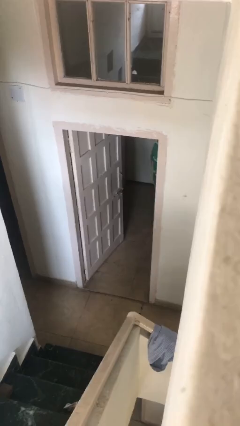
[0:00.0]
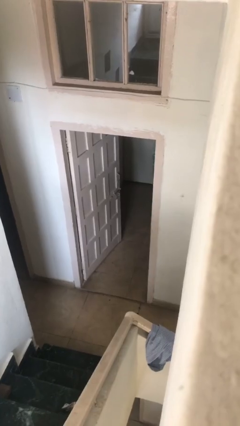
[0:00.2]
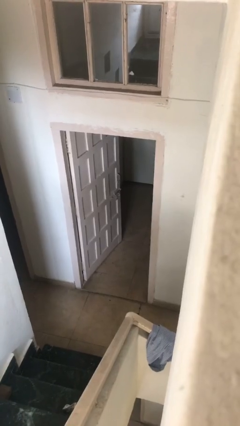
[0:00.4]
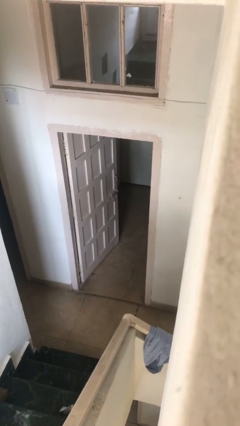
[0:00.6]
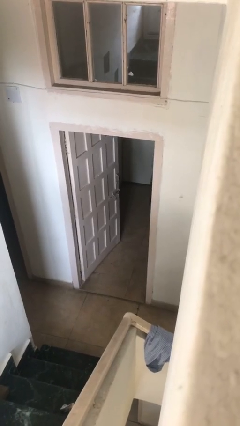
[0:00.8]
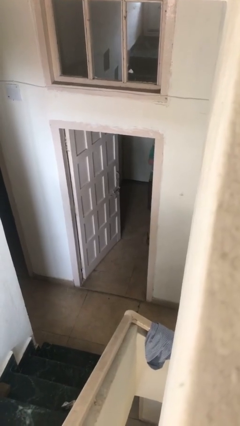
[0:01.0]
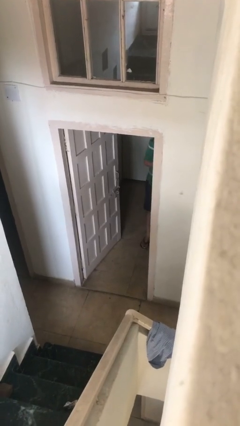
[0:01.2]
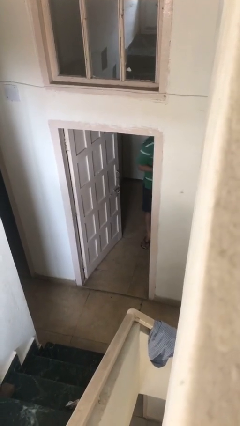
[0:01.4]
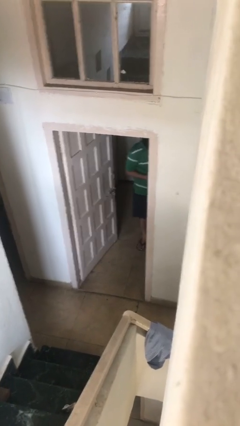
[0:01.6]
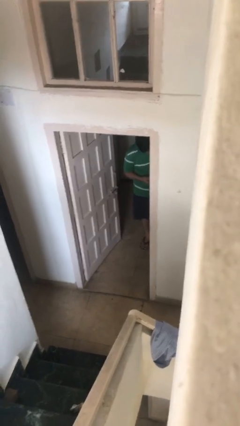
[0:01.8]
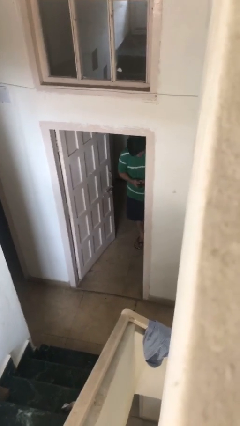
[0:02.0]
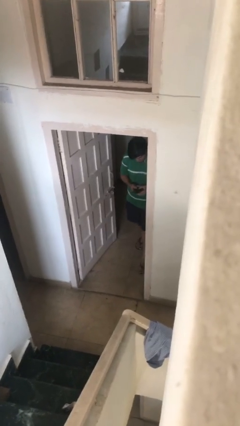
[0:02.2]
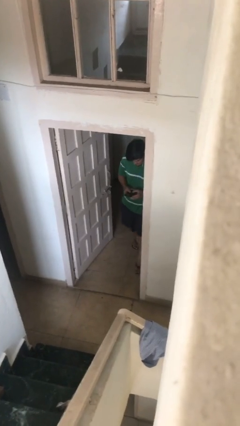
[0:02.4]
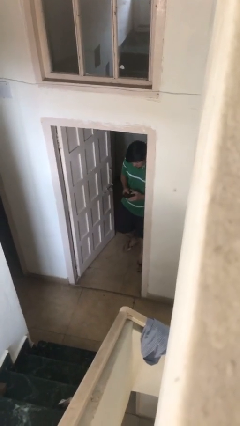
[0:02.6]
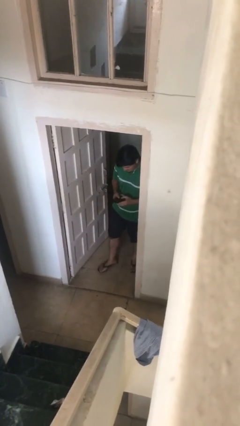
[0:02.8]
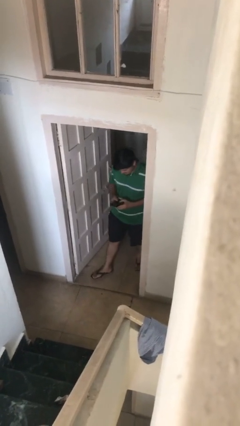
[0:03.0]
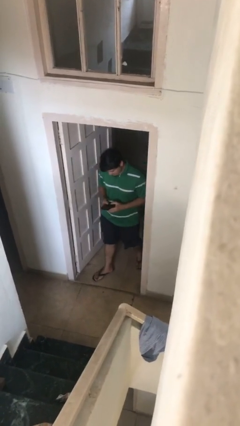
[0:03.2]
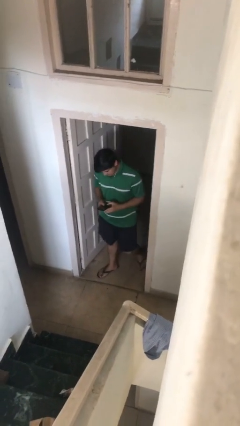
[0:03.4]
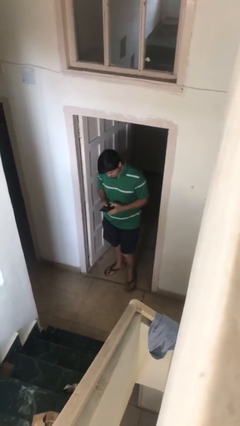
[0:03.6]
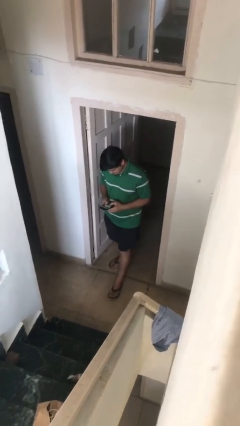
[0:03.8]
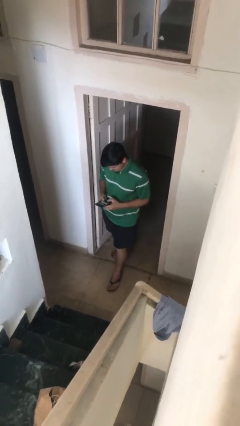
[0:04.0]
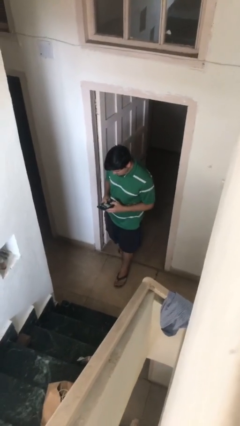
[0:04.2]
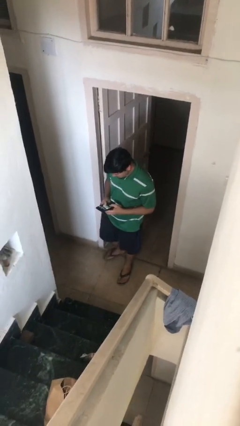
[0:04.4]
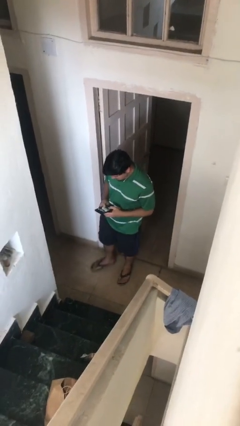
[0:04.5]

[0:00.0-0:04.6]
person enters scene through structure

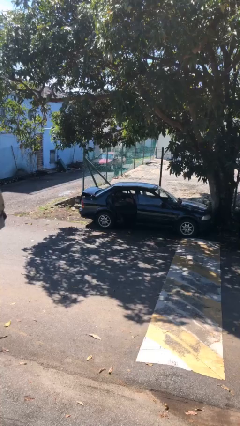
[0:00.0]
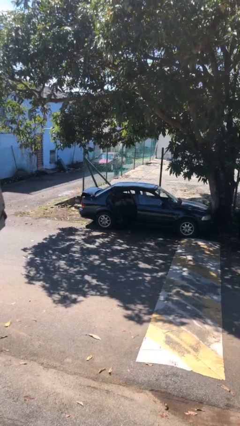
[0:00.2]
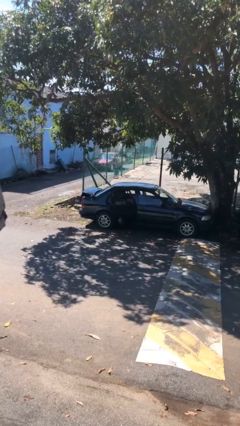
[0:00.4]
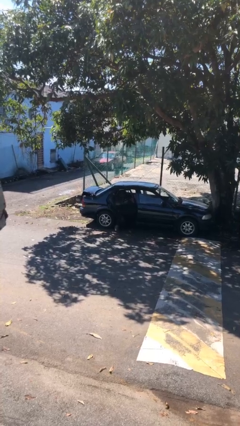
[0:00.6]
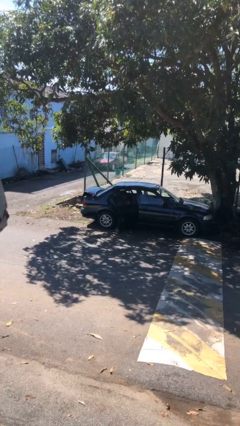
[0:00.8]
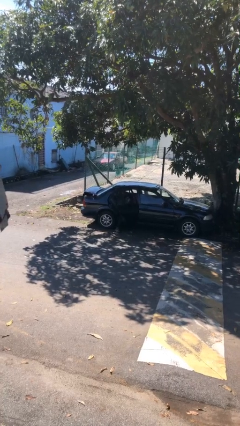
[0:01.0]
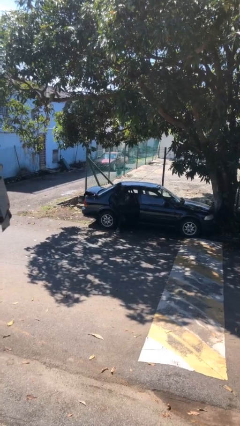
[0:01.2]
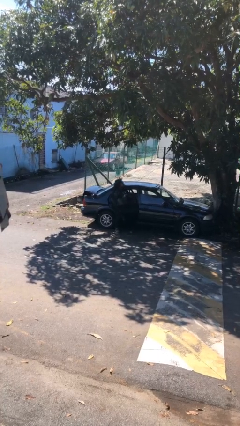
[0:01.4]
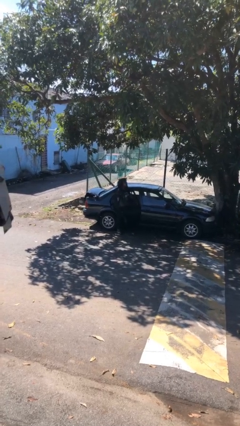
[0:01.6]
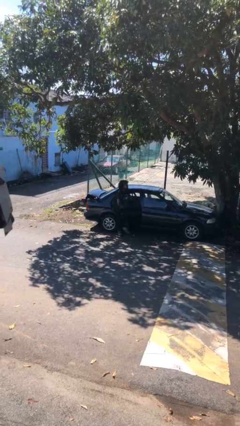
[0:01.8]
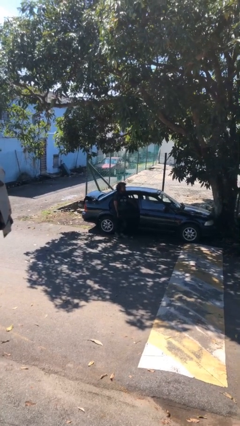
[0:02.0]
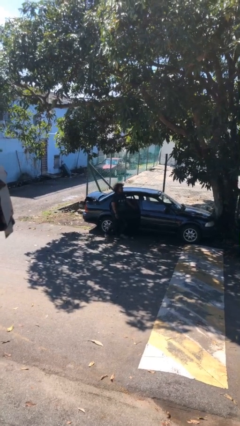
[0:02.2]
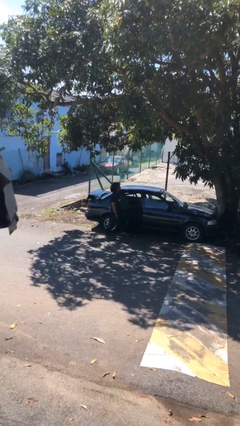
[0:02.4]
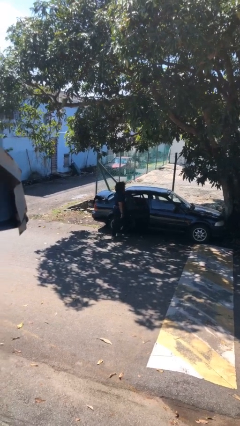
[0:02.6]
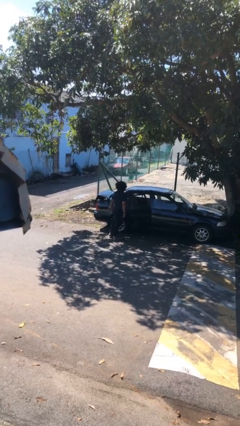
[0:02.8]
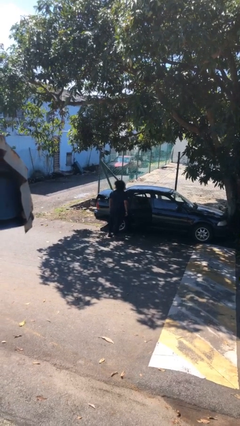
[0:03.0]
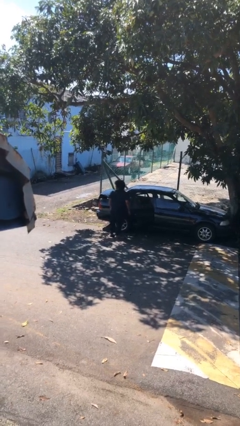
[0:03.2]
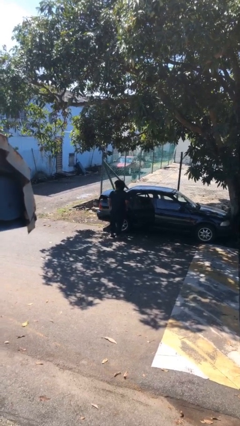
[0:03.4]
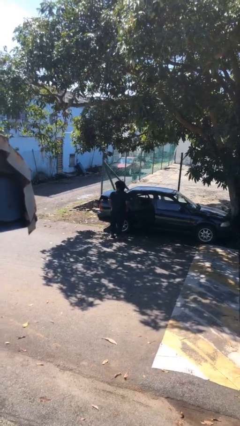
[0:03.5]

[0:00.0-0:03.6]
person exits car

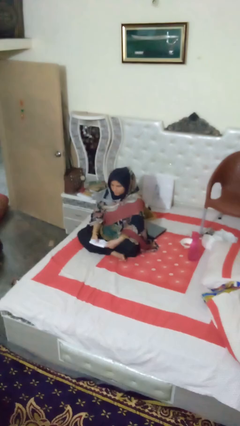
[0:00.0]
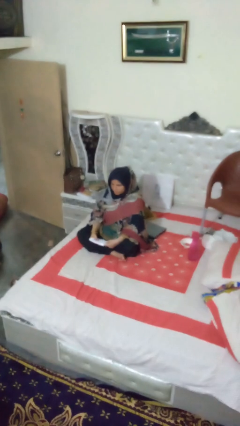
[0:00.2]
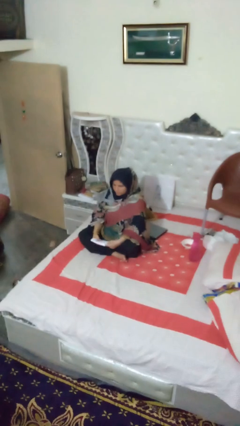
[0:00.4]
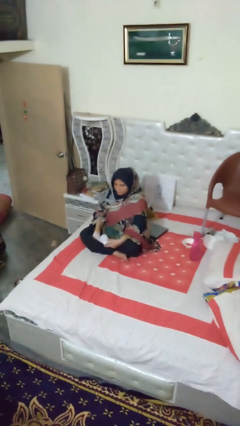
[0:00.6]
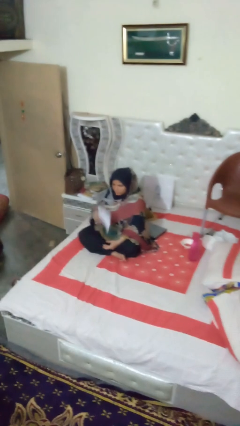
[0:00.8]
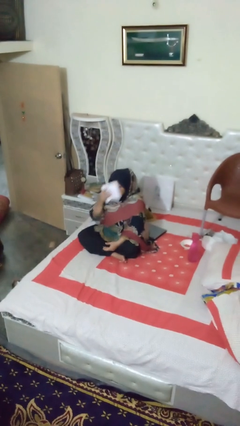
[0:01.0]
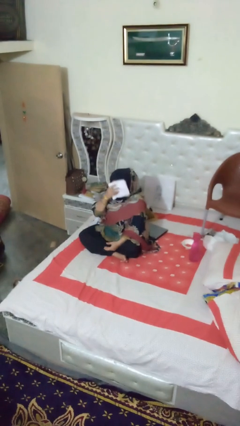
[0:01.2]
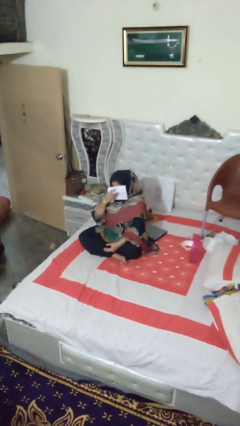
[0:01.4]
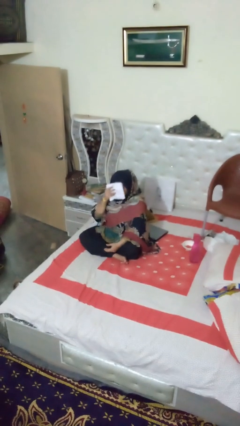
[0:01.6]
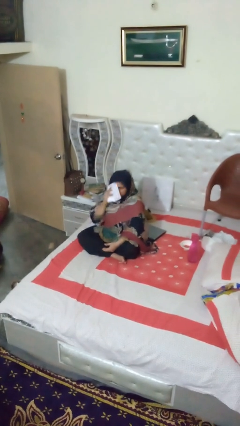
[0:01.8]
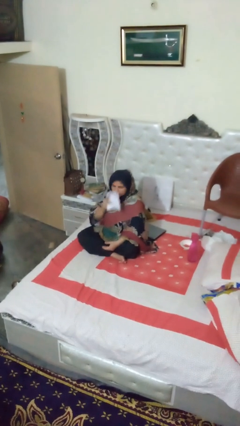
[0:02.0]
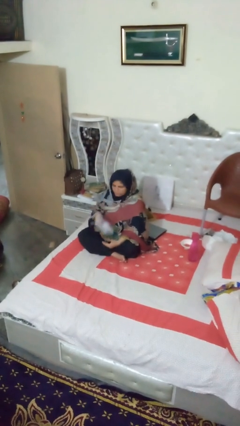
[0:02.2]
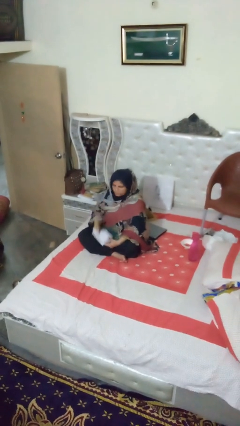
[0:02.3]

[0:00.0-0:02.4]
person wipes mouth with napkin

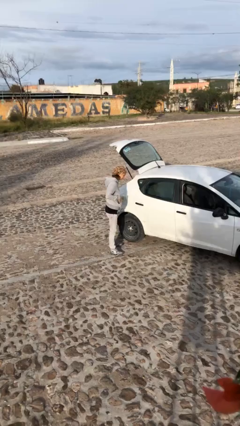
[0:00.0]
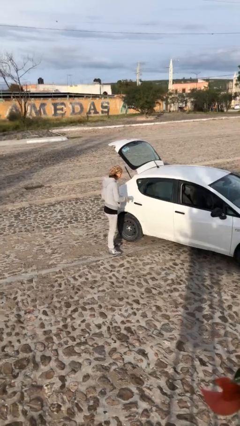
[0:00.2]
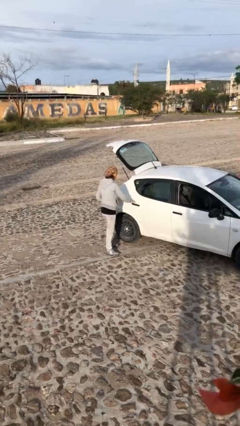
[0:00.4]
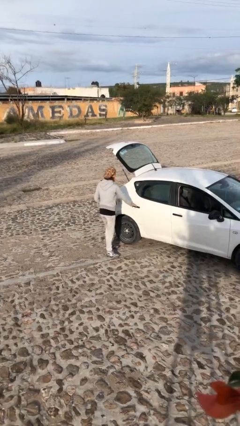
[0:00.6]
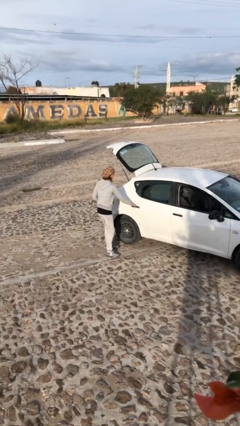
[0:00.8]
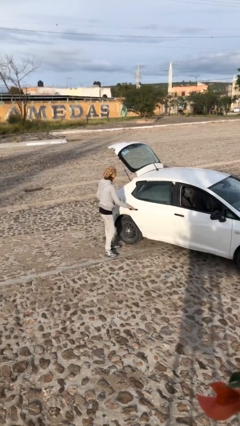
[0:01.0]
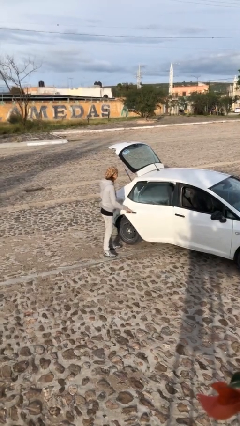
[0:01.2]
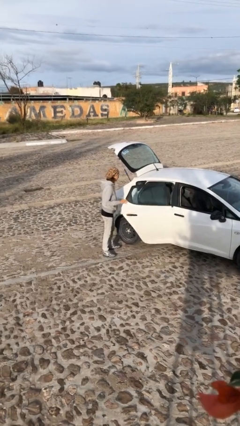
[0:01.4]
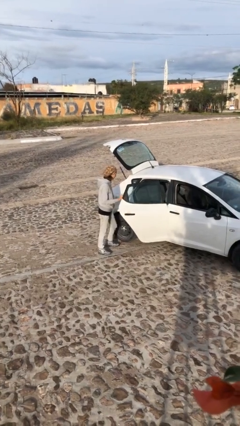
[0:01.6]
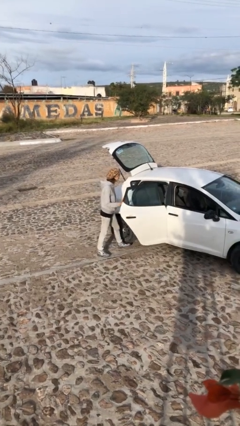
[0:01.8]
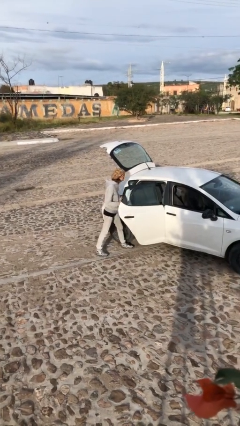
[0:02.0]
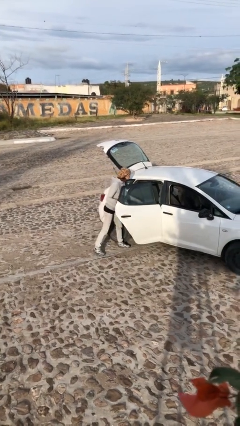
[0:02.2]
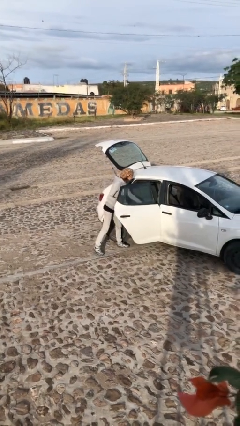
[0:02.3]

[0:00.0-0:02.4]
person opens car door

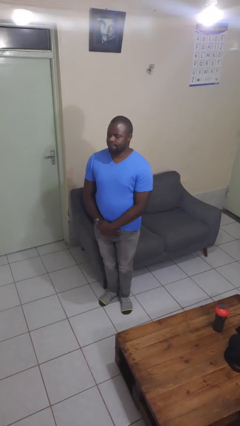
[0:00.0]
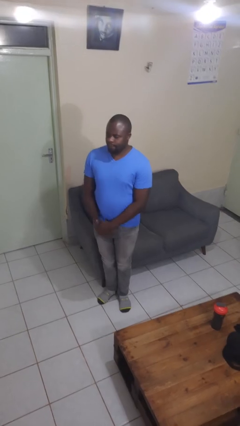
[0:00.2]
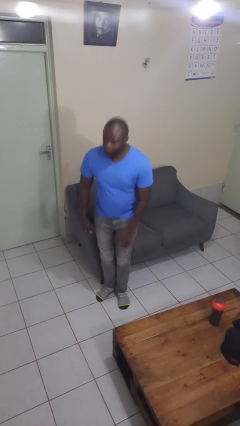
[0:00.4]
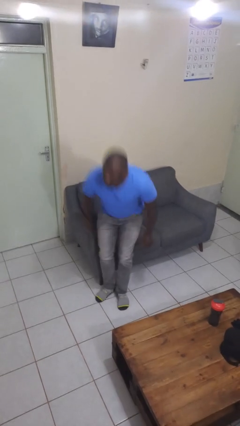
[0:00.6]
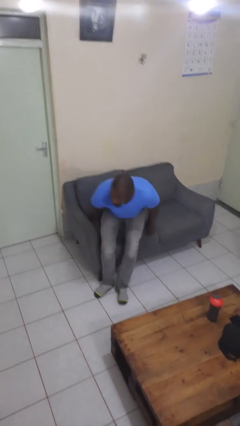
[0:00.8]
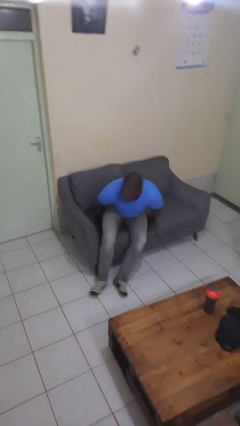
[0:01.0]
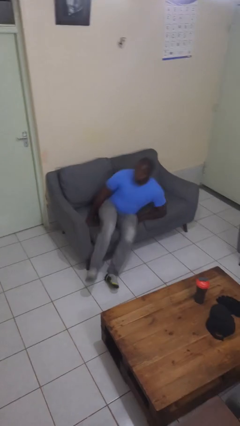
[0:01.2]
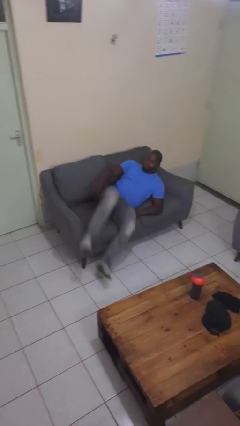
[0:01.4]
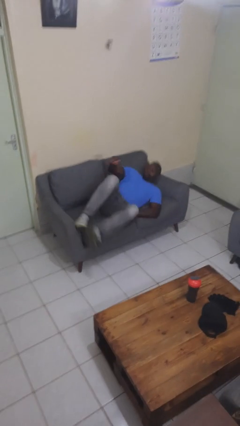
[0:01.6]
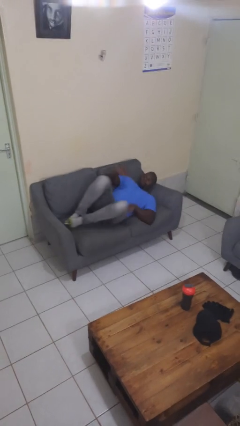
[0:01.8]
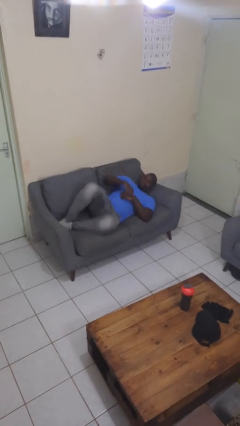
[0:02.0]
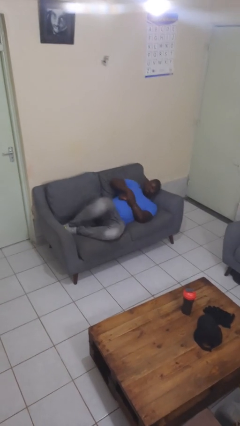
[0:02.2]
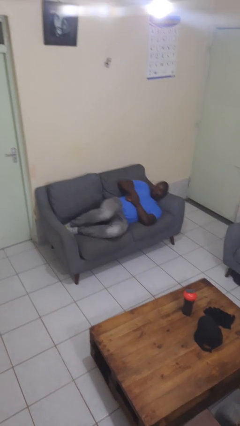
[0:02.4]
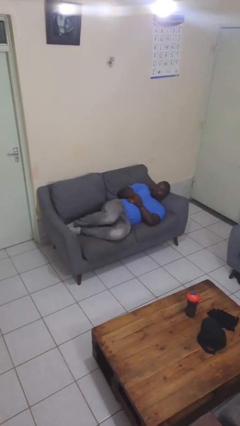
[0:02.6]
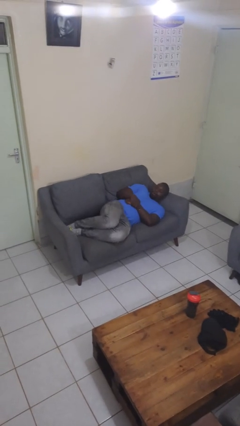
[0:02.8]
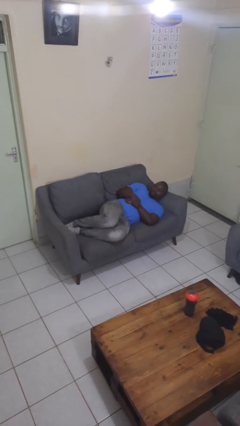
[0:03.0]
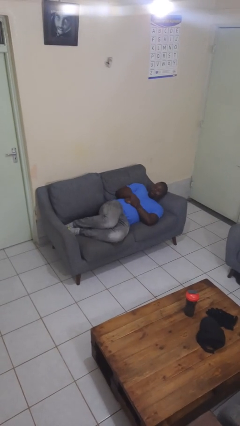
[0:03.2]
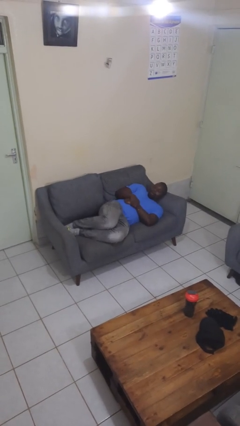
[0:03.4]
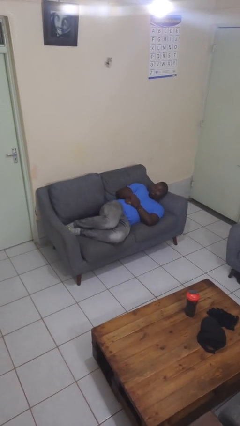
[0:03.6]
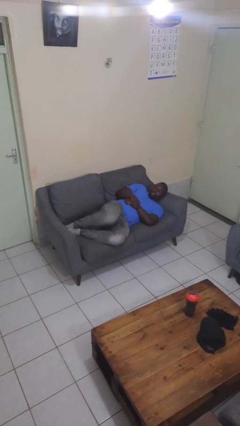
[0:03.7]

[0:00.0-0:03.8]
person lies down on couch

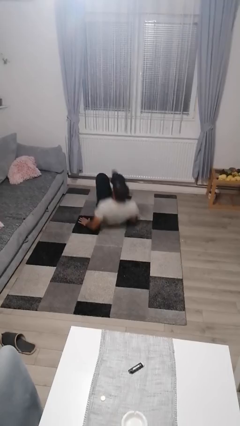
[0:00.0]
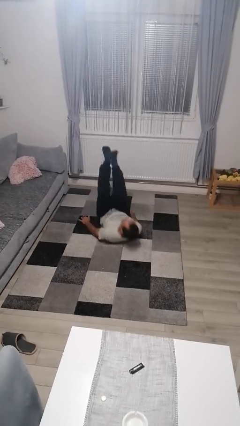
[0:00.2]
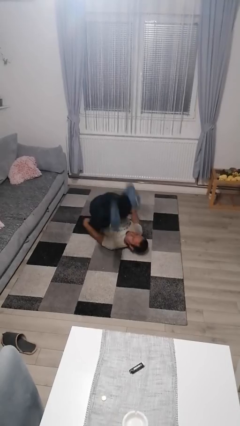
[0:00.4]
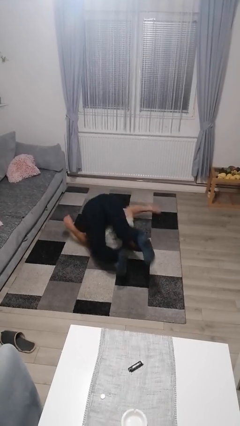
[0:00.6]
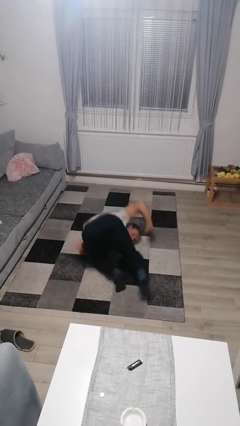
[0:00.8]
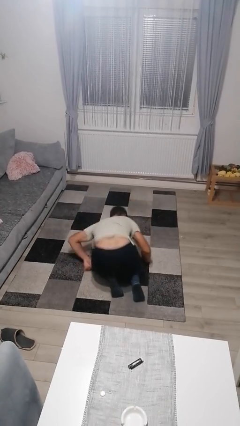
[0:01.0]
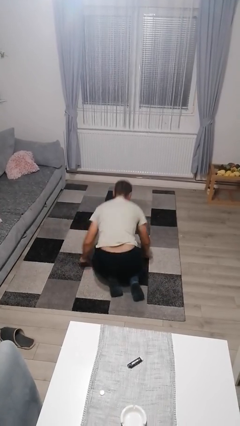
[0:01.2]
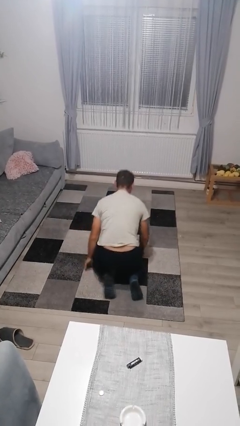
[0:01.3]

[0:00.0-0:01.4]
person somersaults
